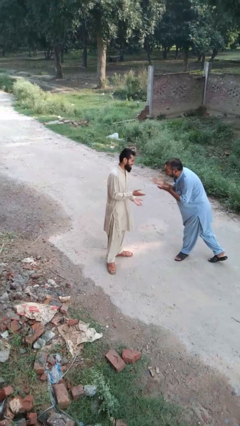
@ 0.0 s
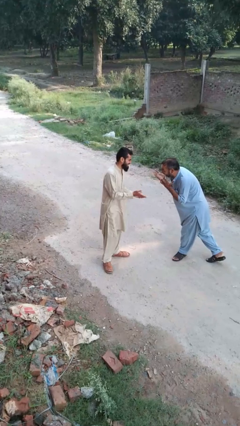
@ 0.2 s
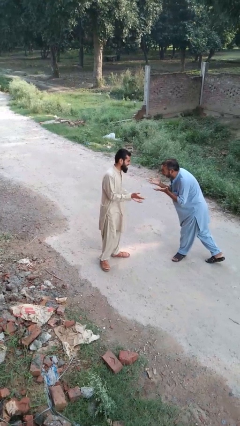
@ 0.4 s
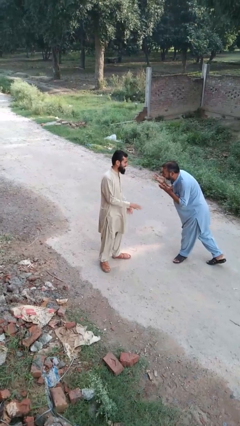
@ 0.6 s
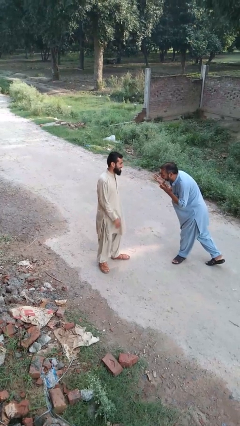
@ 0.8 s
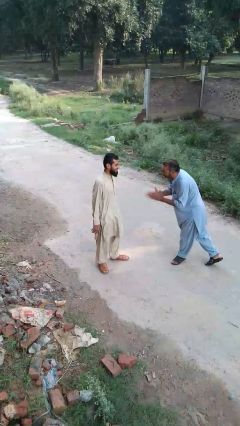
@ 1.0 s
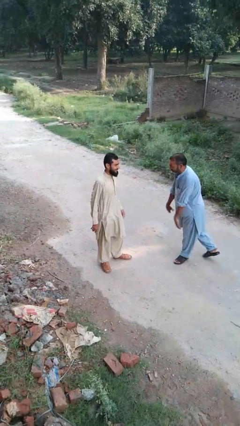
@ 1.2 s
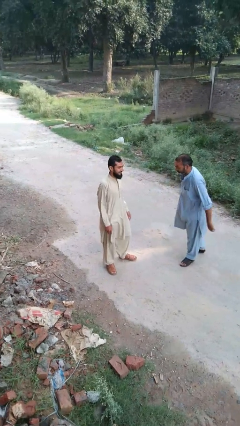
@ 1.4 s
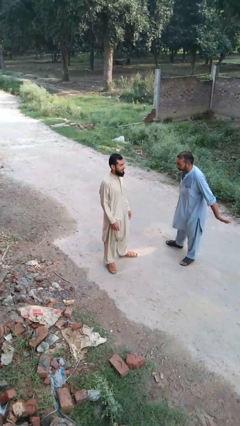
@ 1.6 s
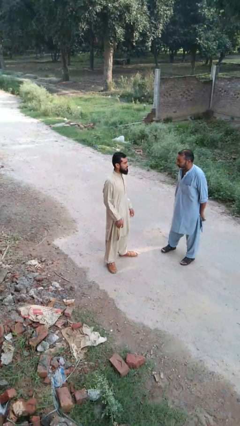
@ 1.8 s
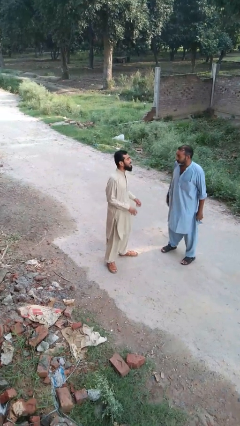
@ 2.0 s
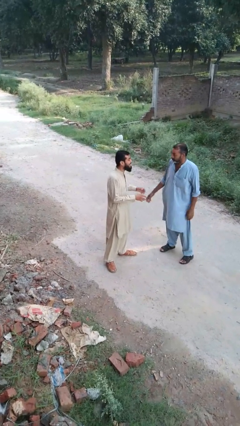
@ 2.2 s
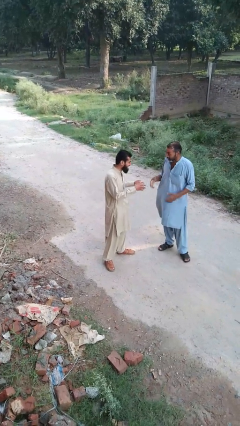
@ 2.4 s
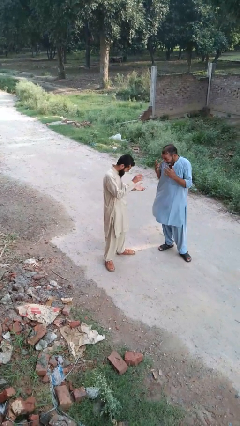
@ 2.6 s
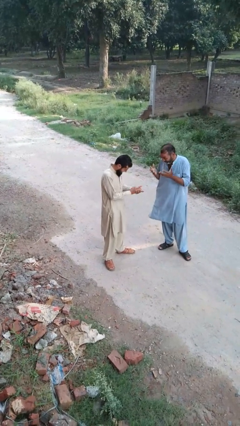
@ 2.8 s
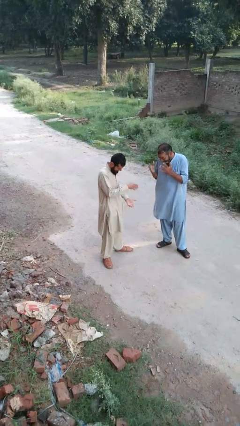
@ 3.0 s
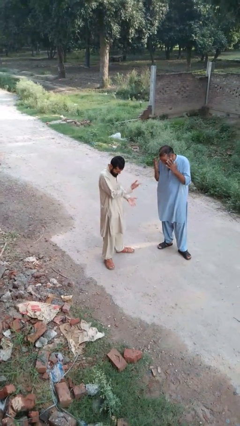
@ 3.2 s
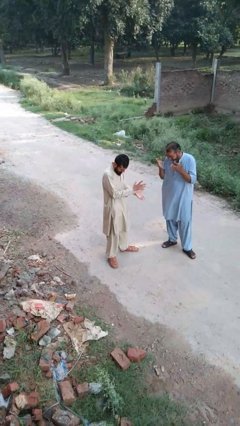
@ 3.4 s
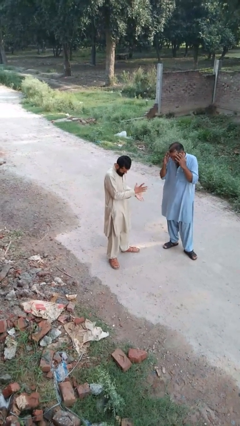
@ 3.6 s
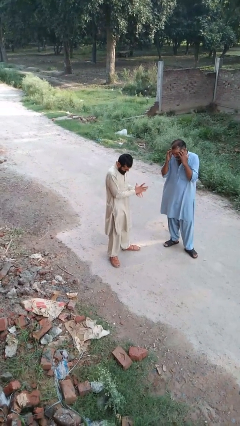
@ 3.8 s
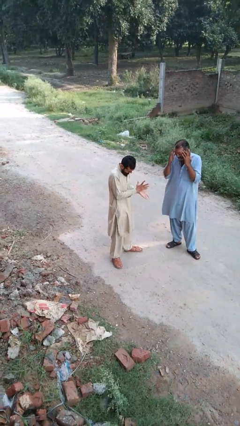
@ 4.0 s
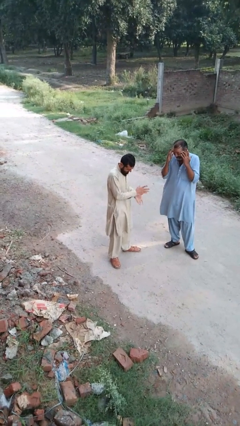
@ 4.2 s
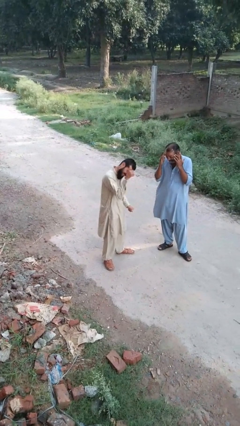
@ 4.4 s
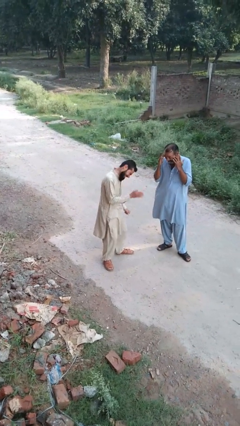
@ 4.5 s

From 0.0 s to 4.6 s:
person laughs with person

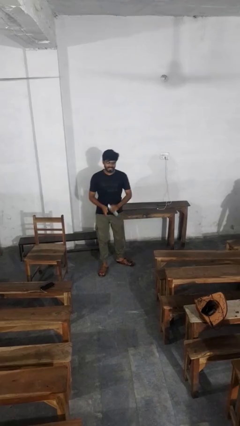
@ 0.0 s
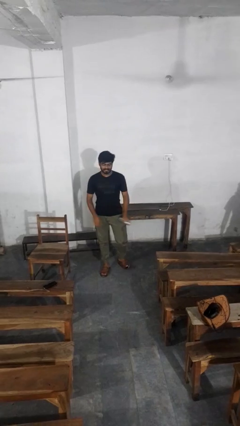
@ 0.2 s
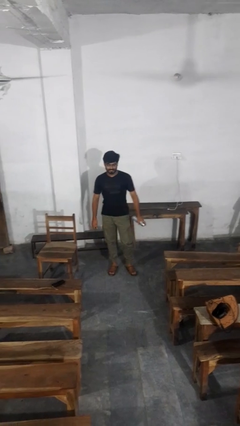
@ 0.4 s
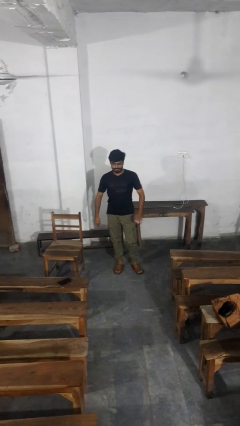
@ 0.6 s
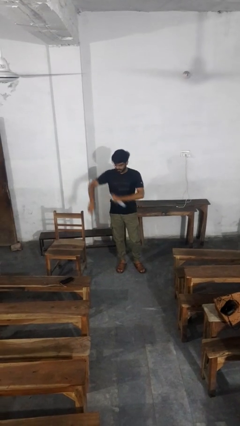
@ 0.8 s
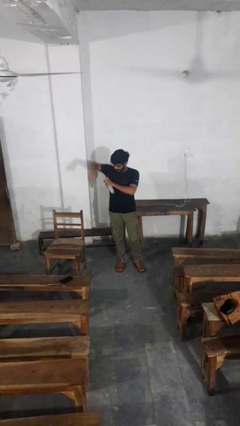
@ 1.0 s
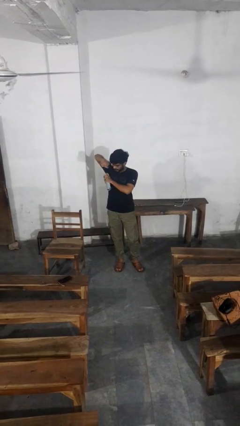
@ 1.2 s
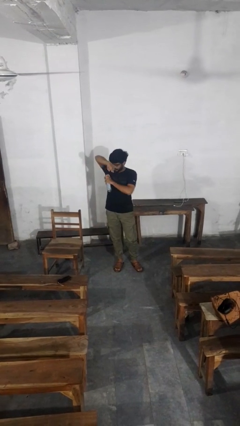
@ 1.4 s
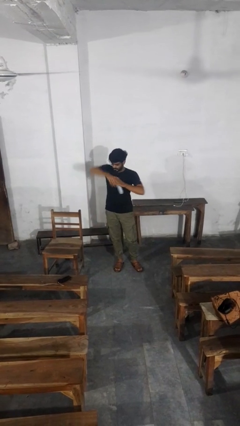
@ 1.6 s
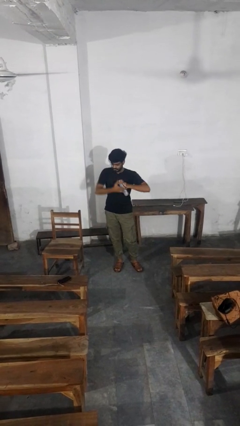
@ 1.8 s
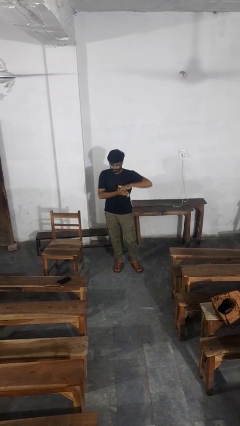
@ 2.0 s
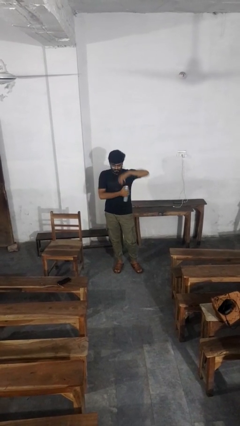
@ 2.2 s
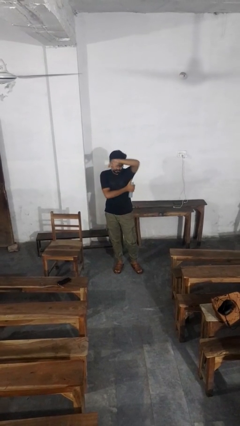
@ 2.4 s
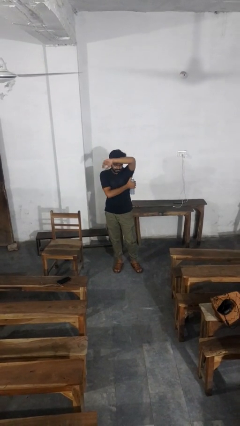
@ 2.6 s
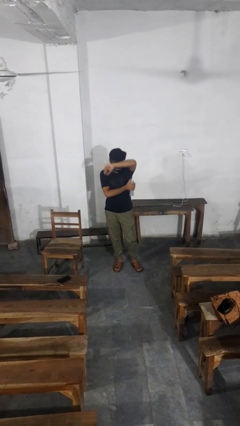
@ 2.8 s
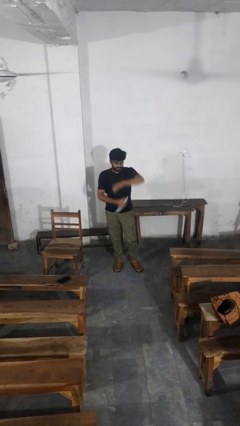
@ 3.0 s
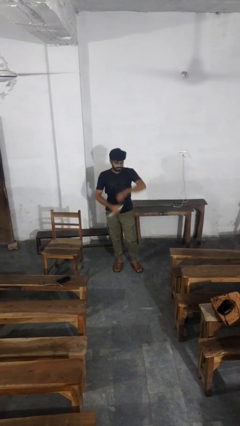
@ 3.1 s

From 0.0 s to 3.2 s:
person applies deodorant

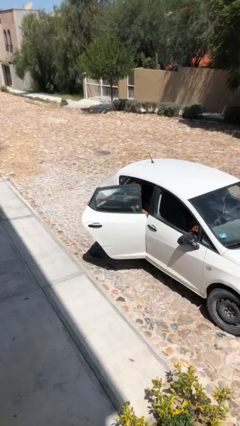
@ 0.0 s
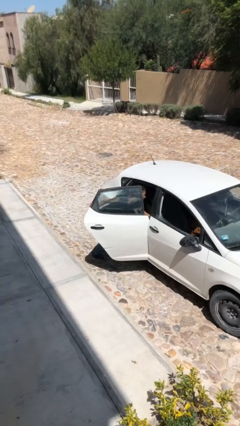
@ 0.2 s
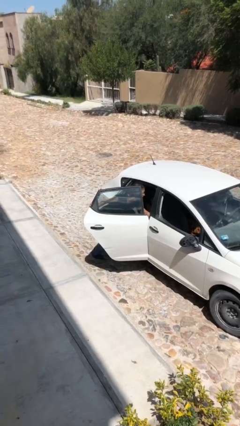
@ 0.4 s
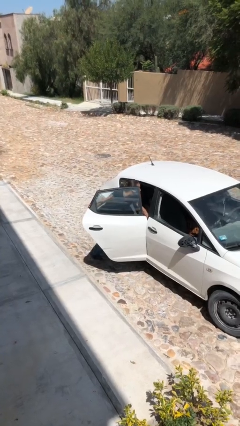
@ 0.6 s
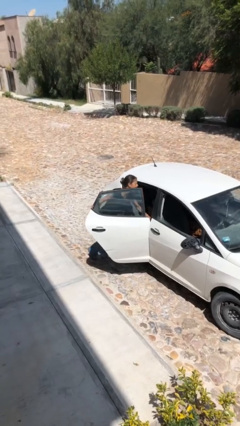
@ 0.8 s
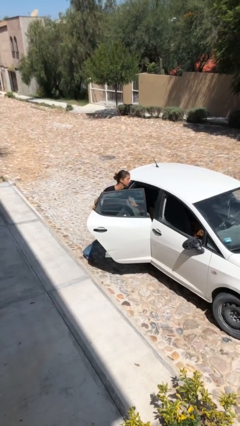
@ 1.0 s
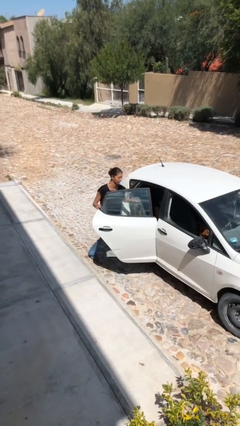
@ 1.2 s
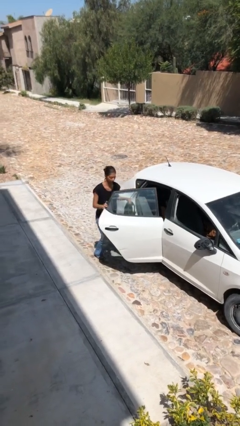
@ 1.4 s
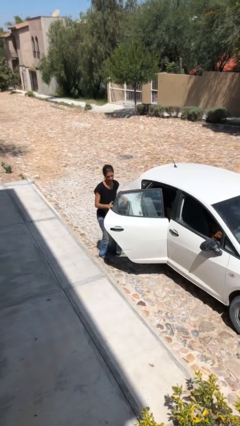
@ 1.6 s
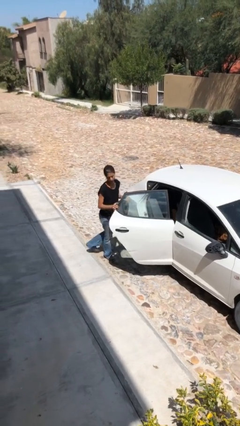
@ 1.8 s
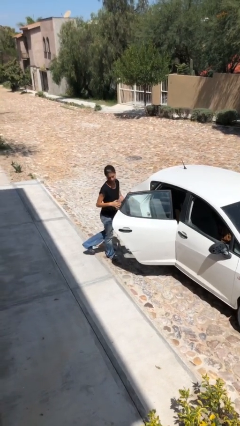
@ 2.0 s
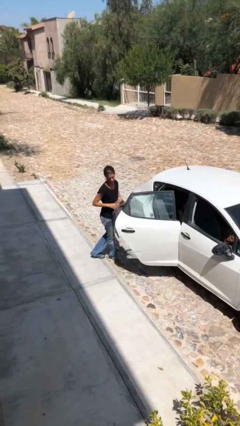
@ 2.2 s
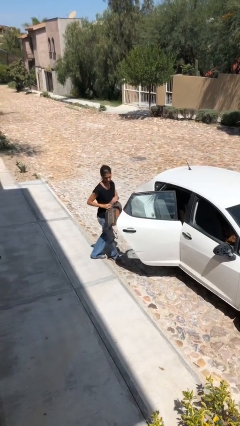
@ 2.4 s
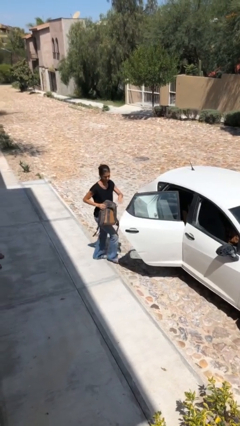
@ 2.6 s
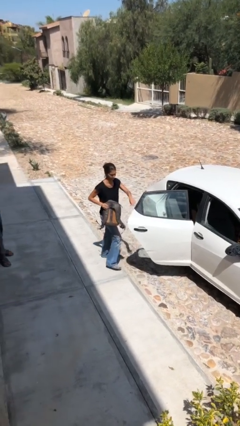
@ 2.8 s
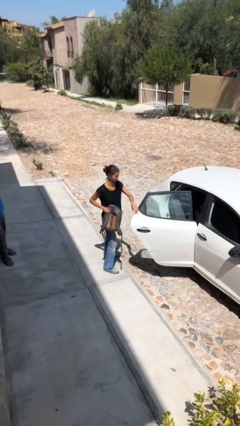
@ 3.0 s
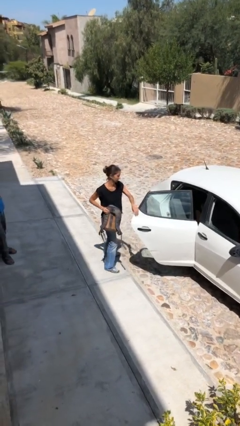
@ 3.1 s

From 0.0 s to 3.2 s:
person unloads car

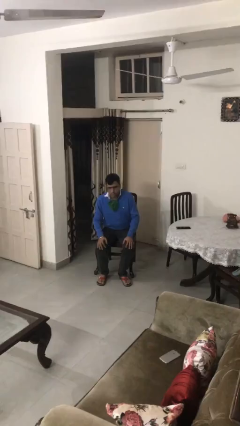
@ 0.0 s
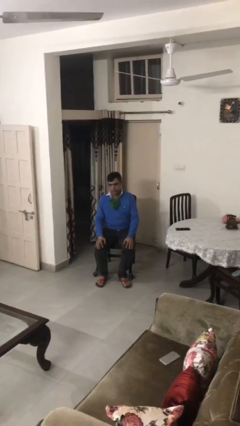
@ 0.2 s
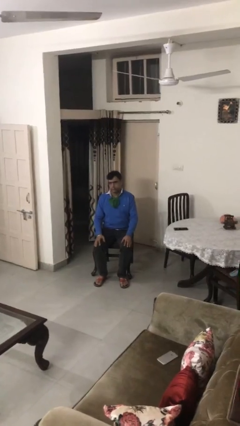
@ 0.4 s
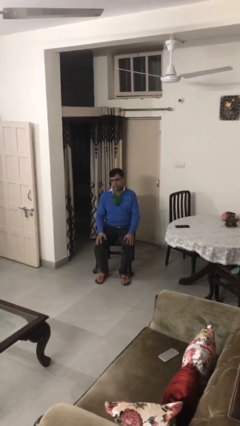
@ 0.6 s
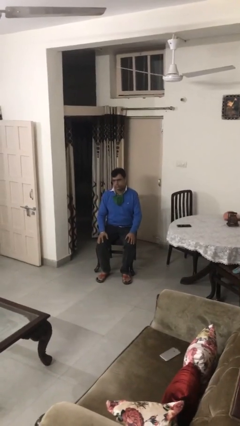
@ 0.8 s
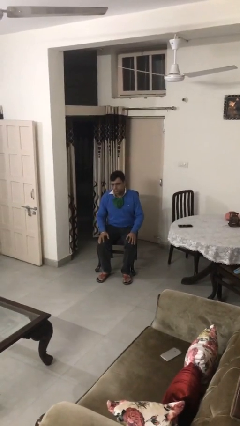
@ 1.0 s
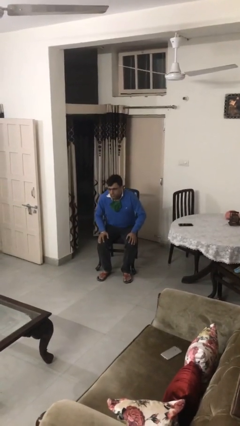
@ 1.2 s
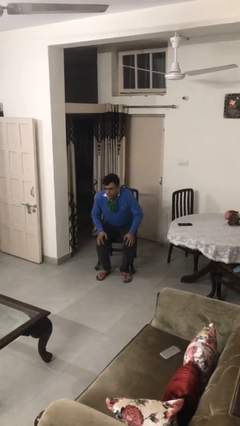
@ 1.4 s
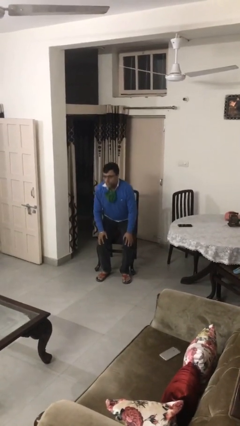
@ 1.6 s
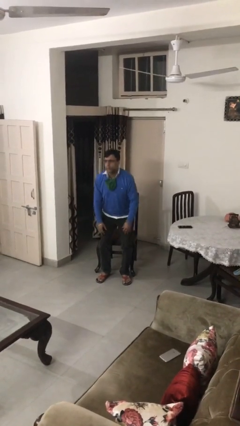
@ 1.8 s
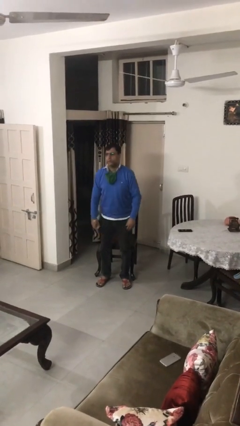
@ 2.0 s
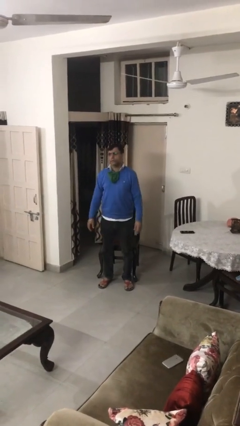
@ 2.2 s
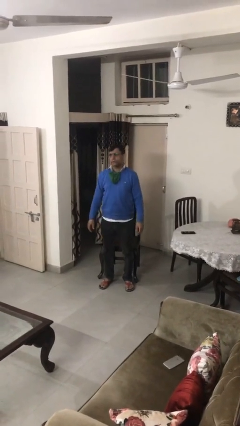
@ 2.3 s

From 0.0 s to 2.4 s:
person stands up

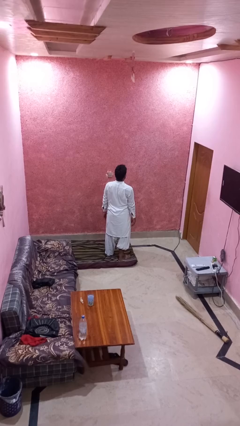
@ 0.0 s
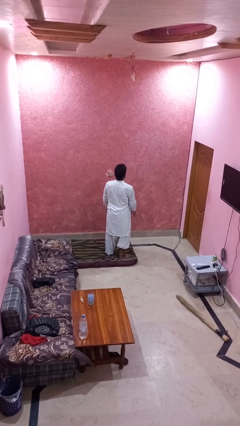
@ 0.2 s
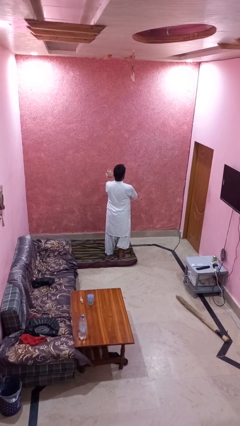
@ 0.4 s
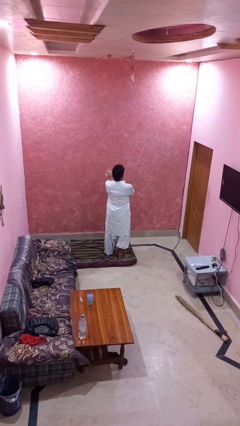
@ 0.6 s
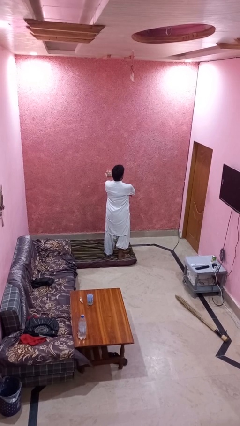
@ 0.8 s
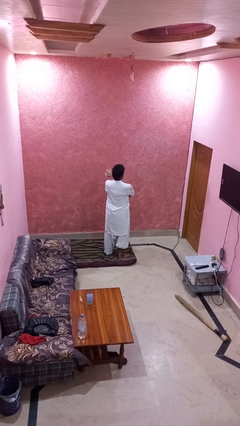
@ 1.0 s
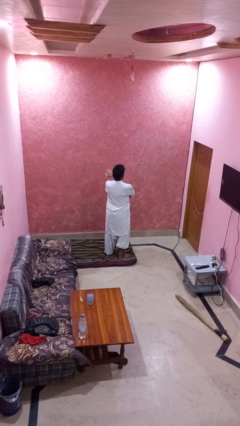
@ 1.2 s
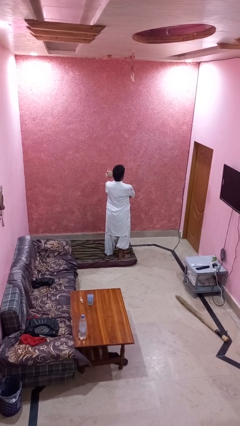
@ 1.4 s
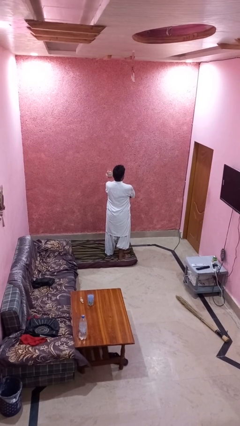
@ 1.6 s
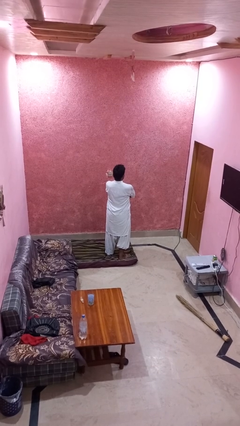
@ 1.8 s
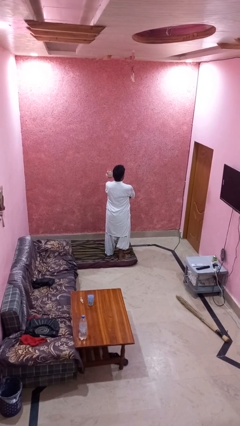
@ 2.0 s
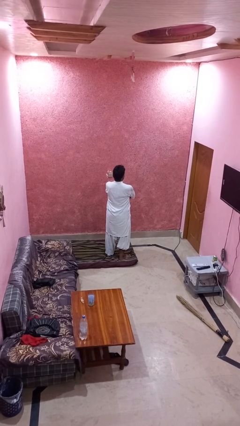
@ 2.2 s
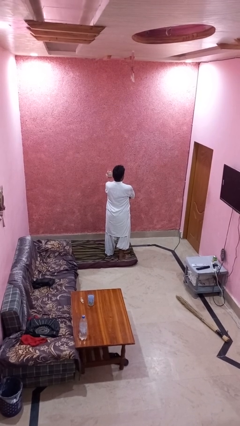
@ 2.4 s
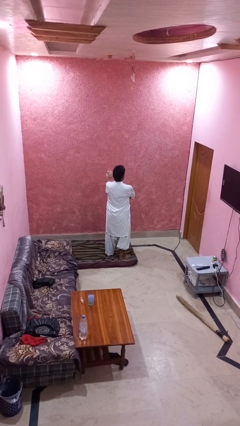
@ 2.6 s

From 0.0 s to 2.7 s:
person crosses arms

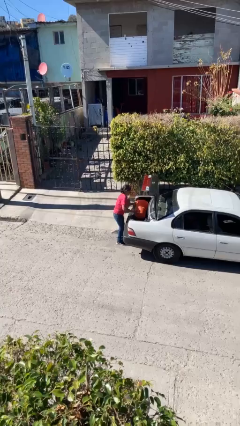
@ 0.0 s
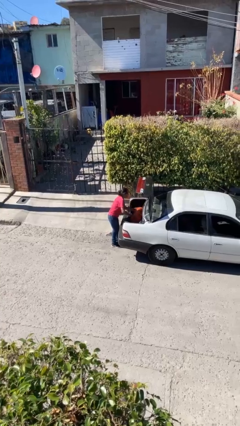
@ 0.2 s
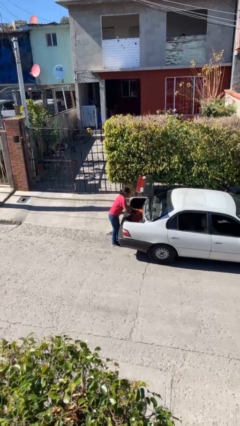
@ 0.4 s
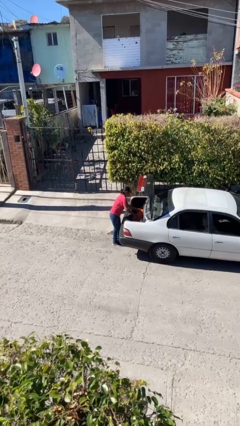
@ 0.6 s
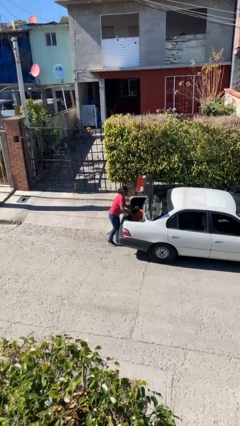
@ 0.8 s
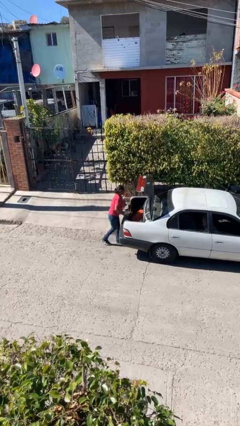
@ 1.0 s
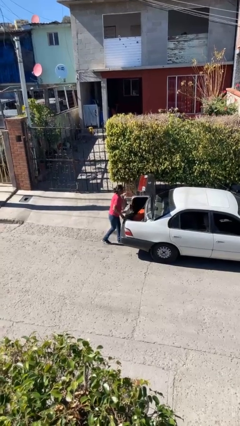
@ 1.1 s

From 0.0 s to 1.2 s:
person loads car
